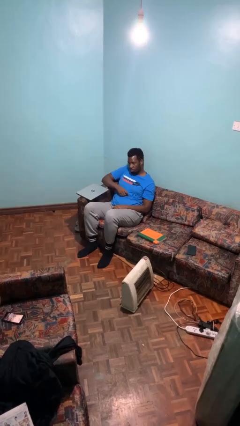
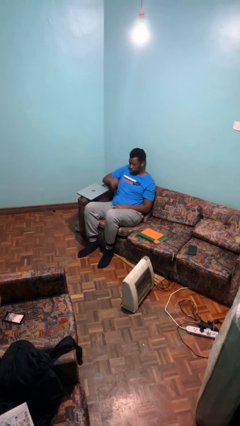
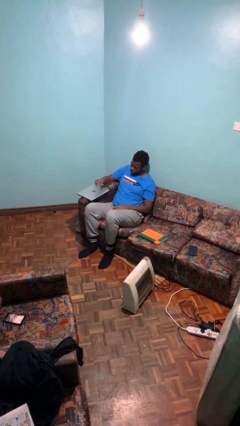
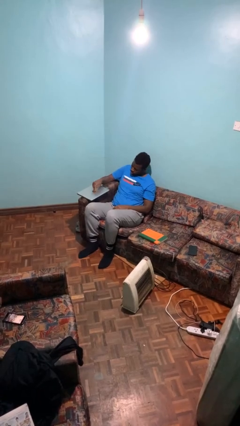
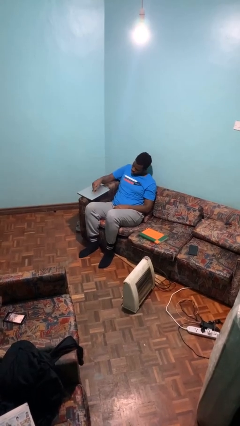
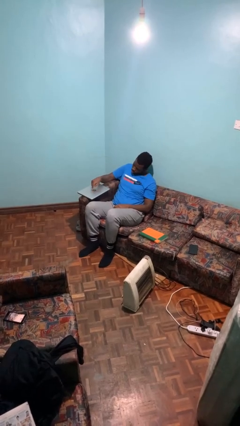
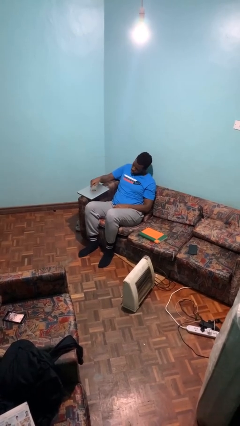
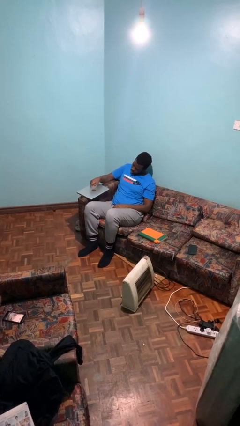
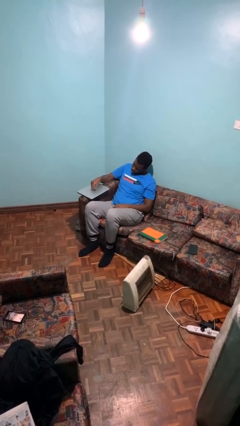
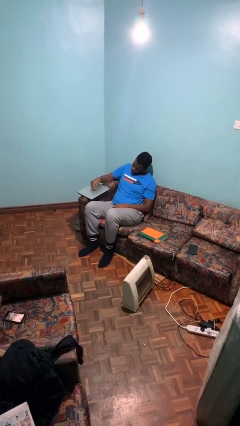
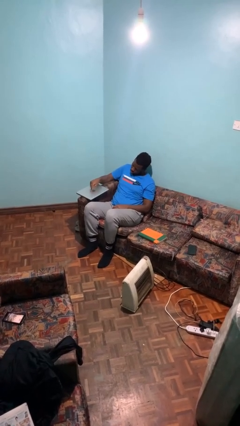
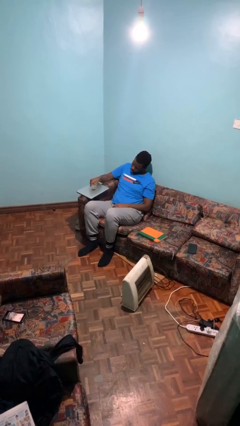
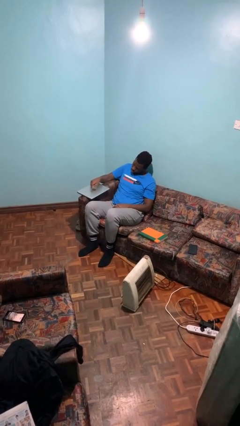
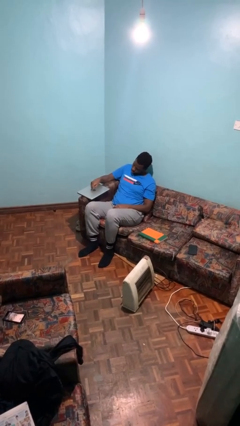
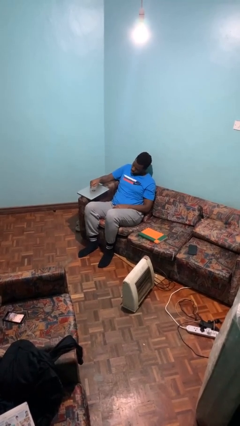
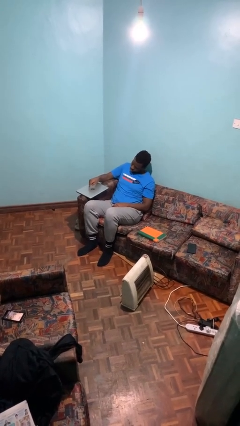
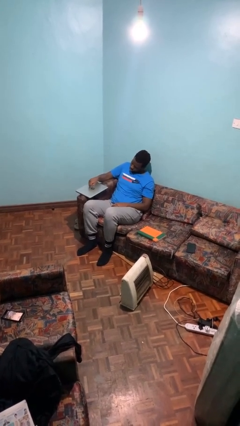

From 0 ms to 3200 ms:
person taps object with finger

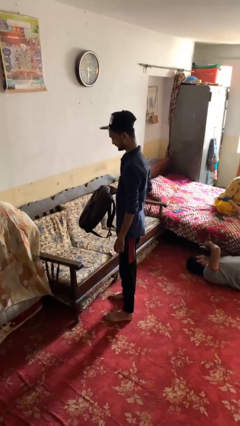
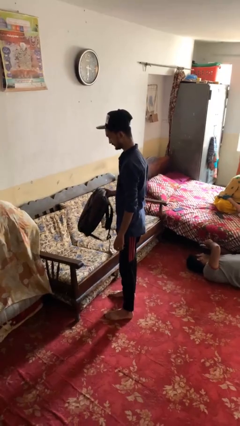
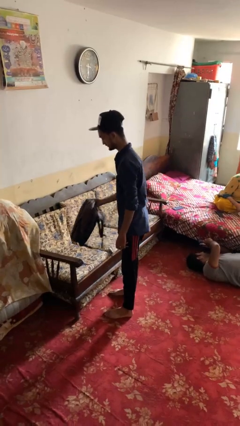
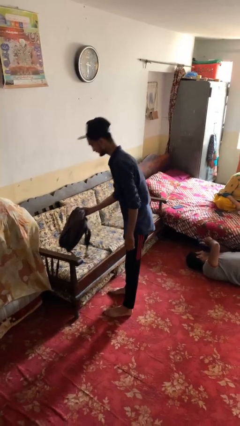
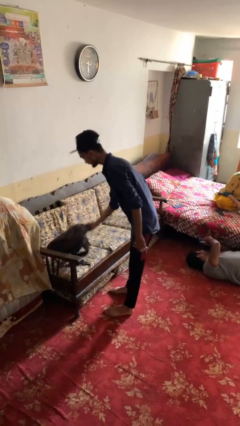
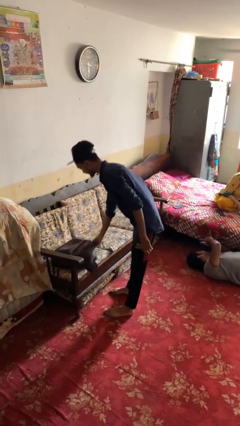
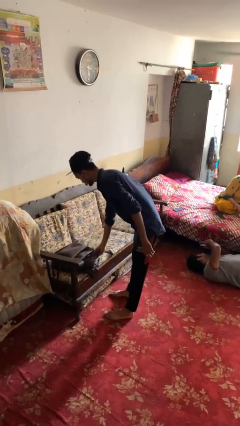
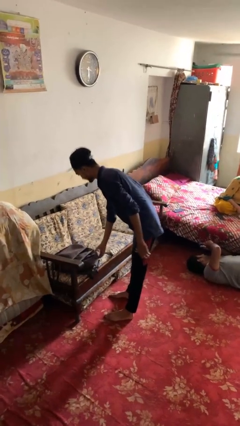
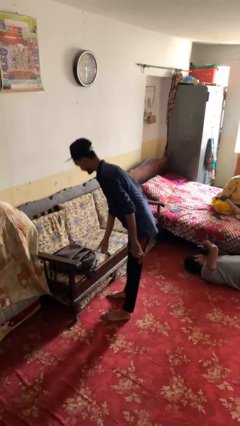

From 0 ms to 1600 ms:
person puts down object on couch

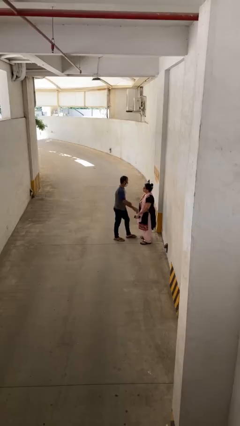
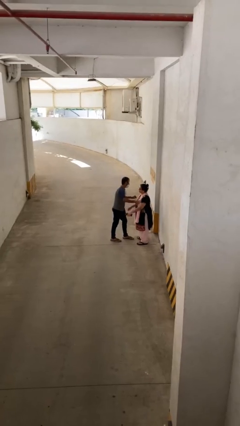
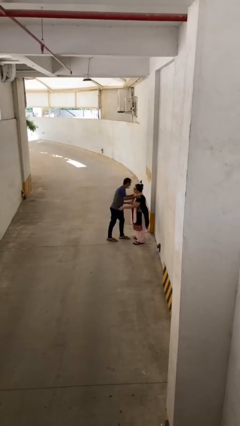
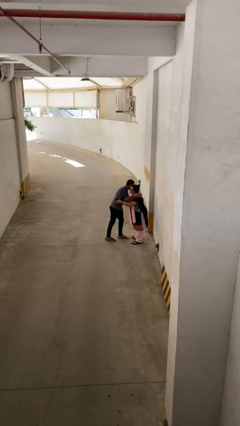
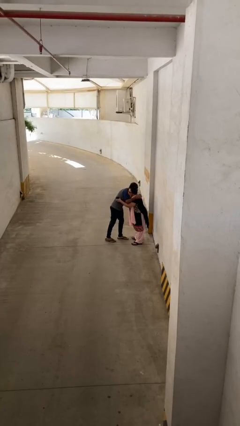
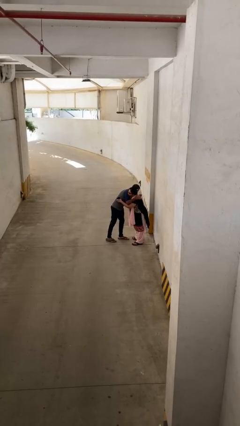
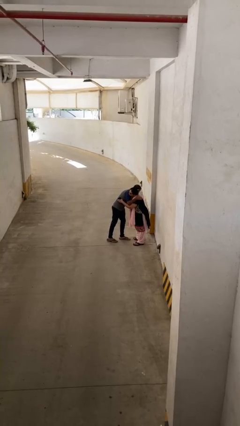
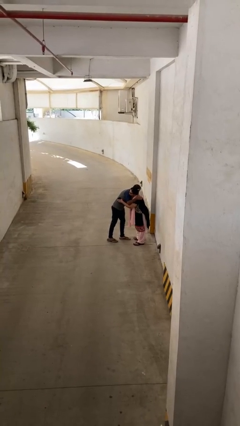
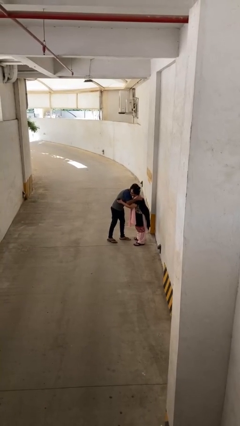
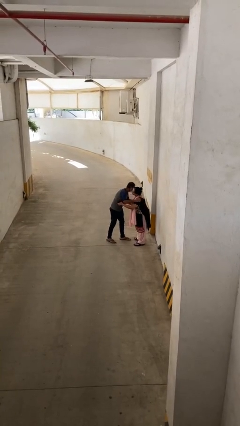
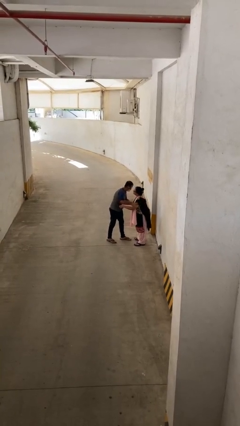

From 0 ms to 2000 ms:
person embraces person

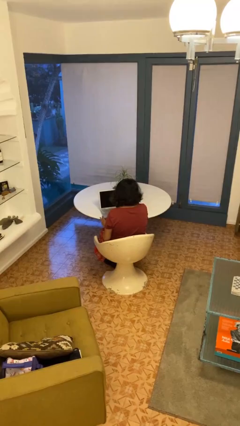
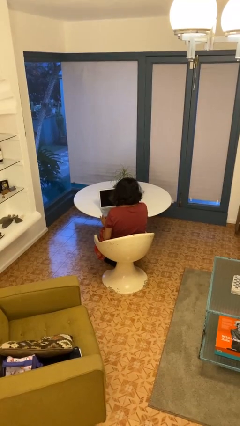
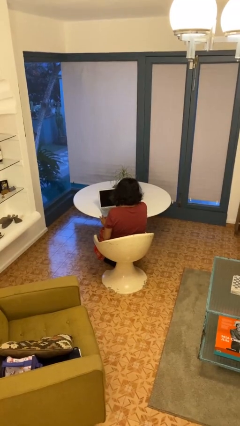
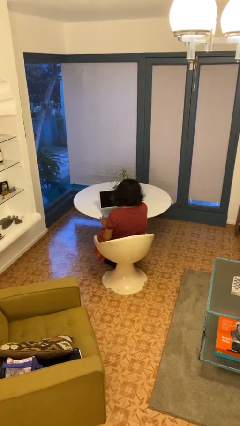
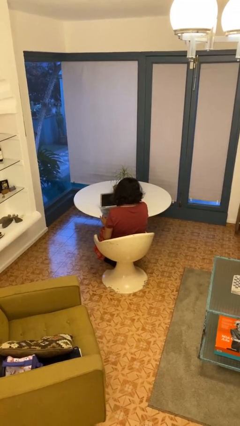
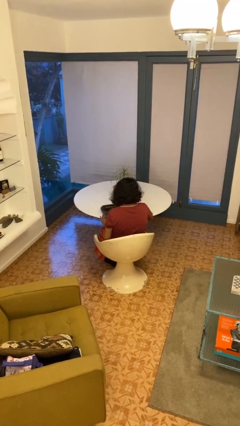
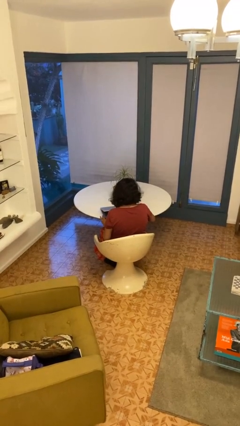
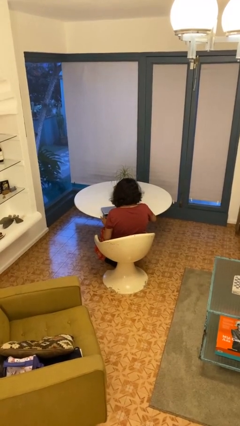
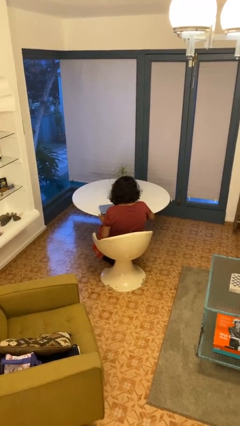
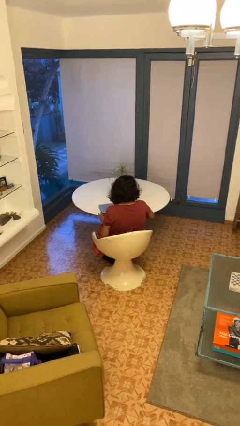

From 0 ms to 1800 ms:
person closes laptop

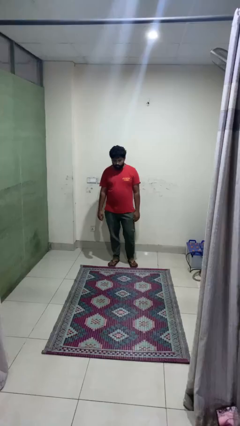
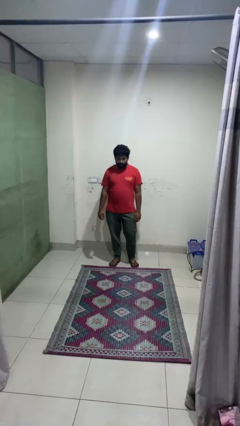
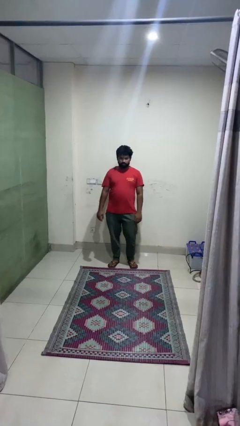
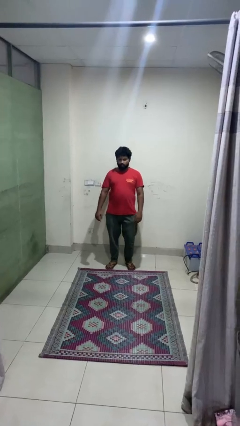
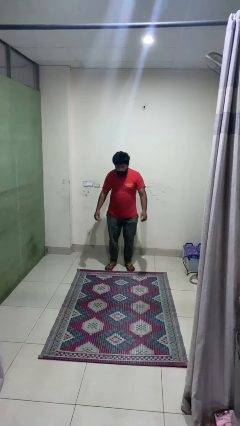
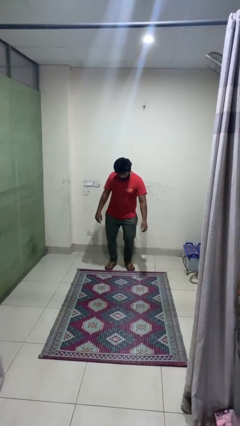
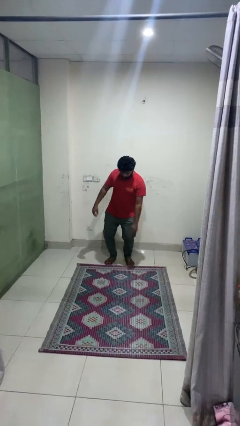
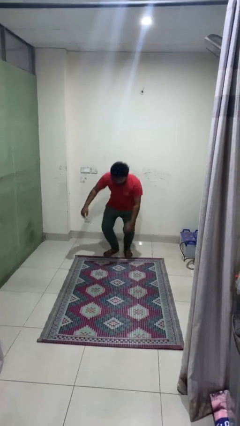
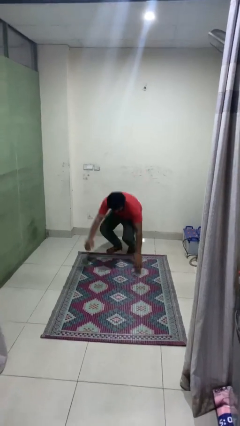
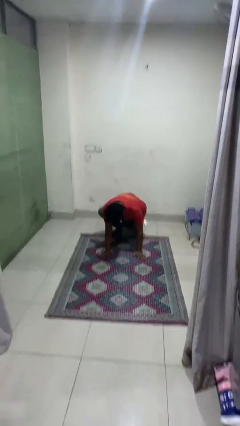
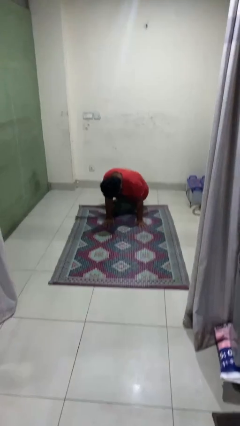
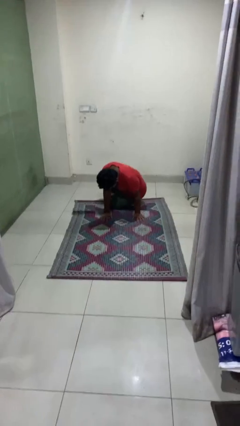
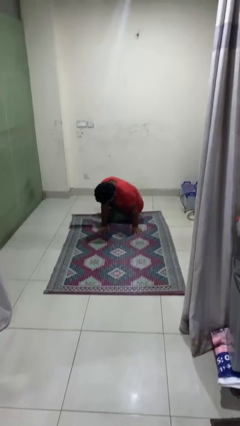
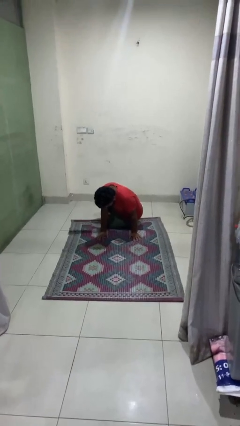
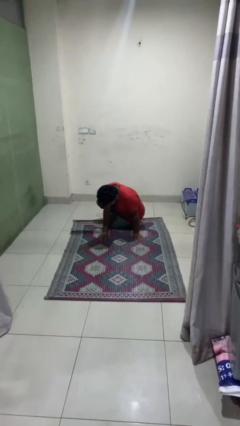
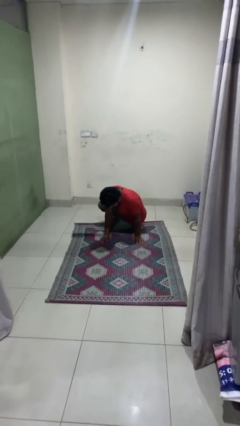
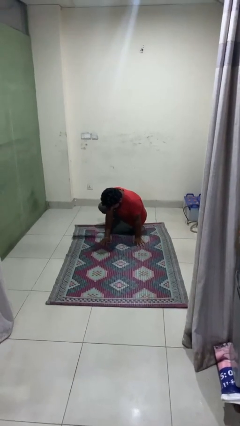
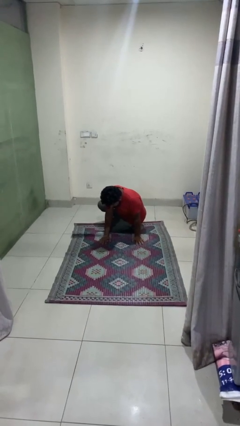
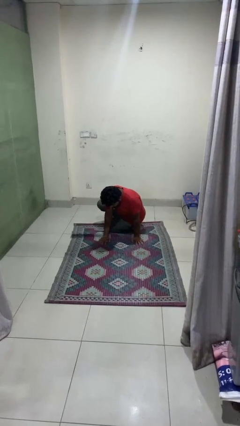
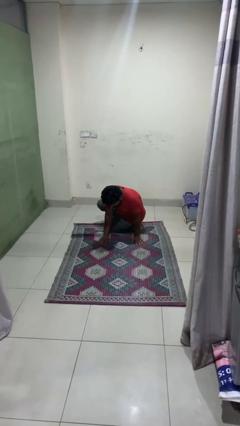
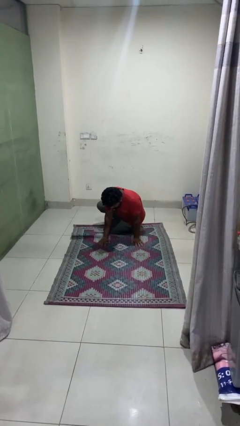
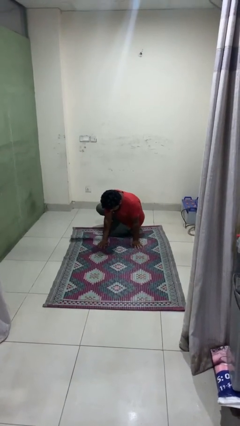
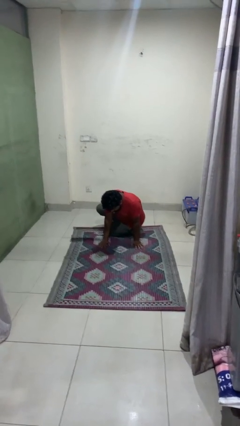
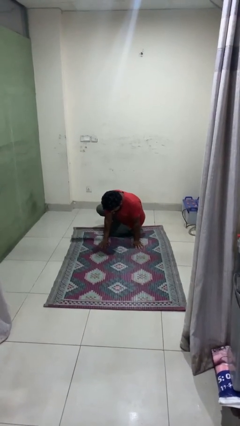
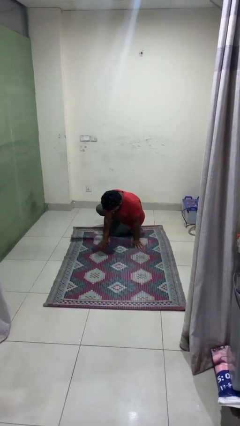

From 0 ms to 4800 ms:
person falls while standing

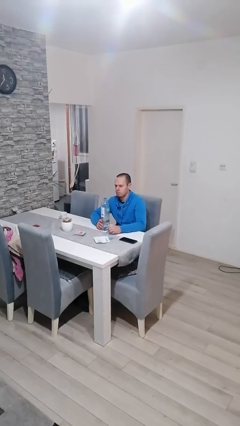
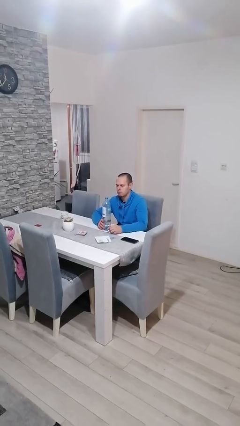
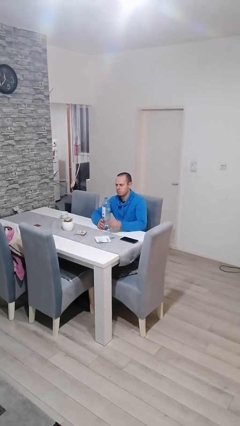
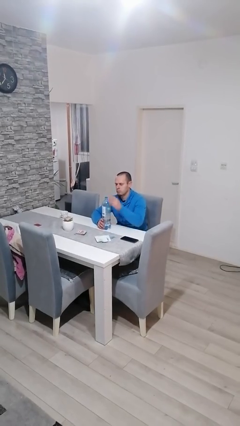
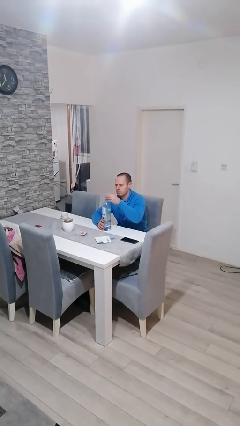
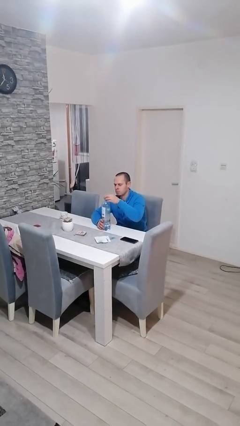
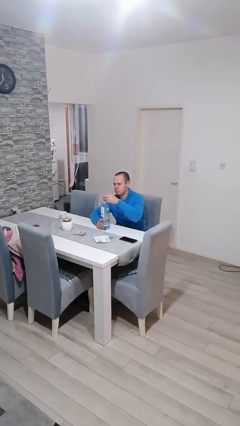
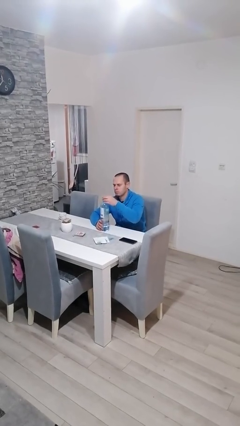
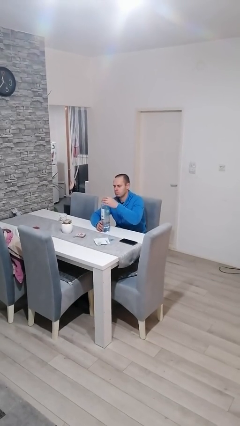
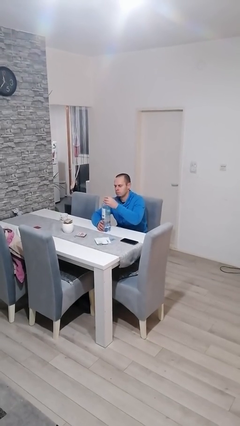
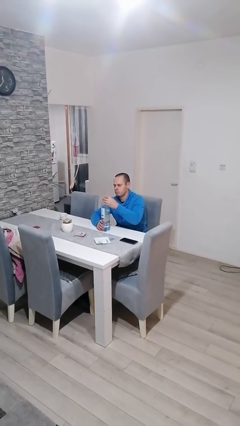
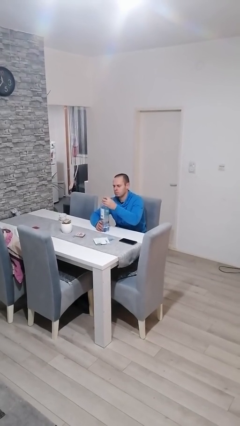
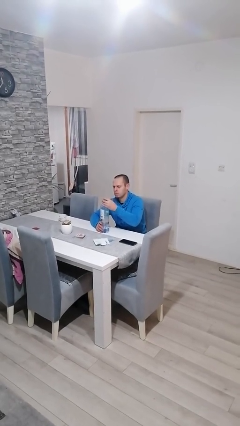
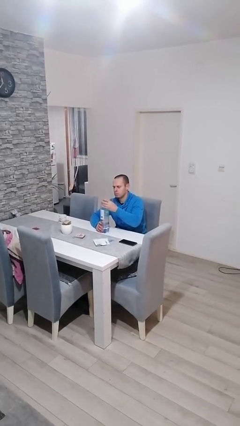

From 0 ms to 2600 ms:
person screws lid to bottle

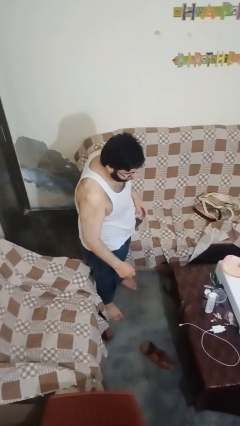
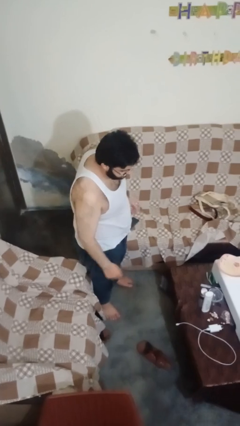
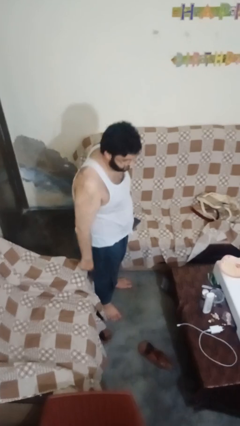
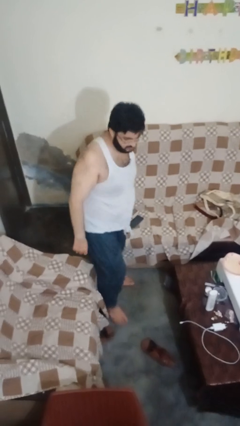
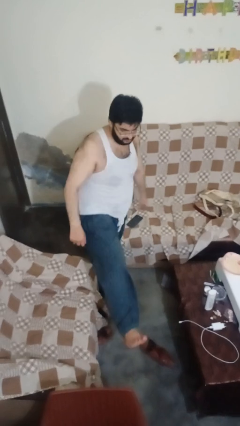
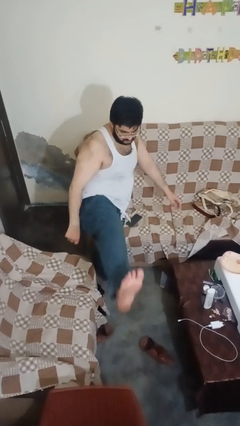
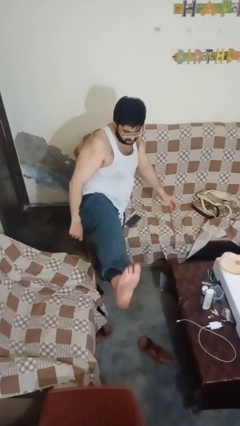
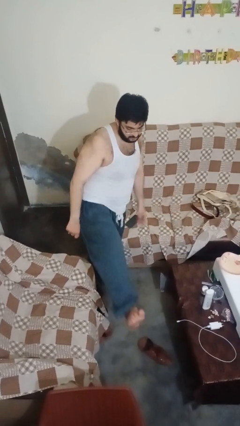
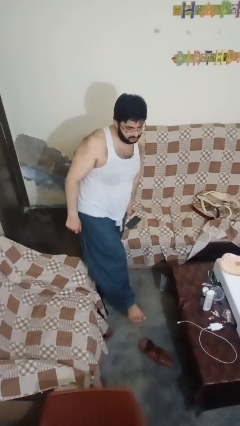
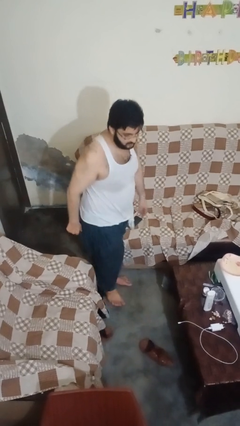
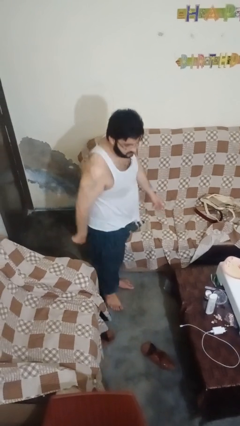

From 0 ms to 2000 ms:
person karate kicks
